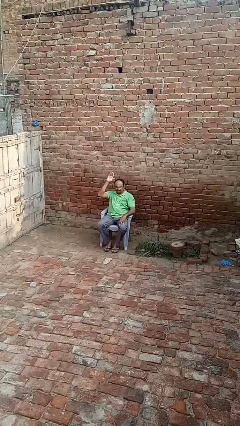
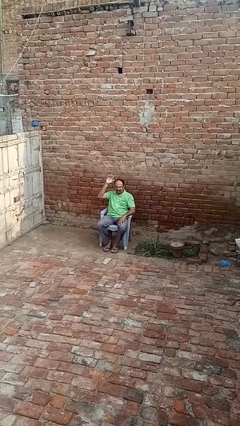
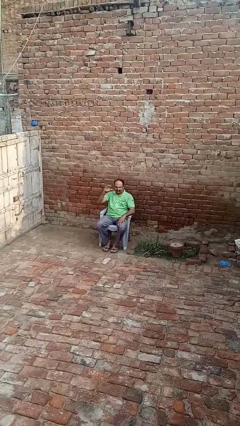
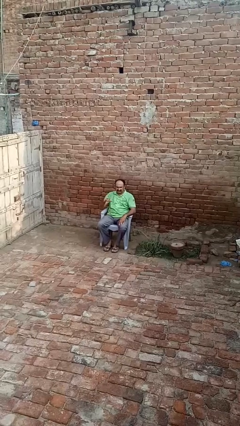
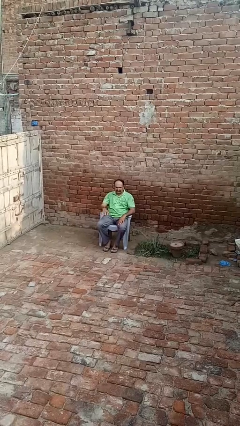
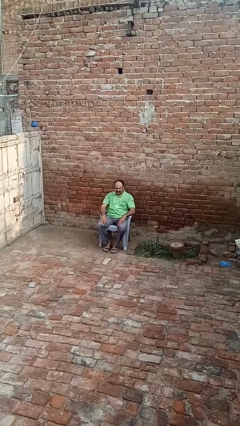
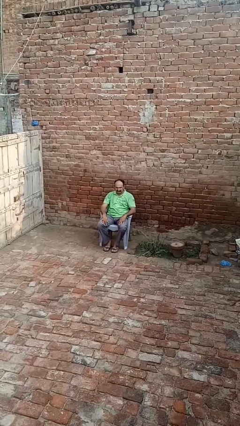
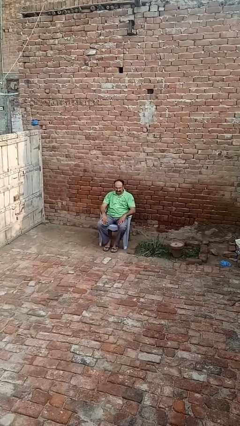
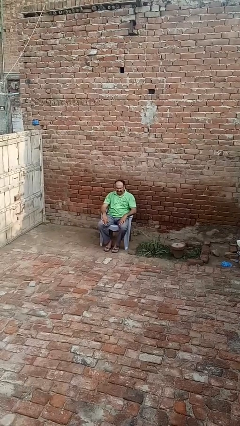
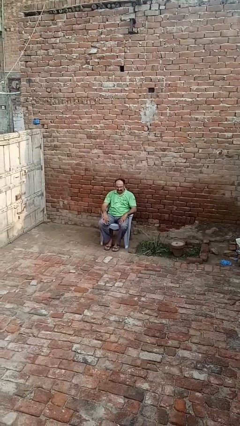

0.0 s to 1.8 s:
person gestures lower hand

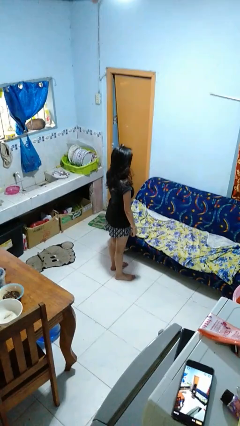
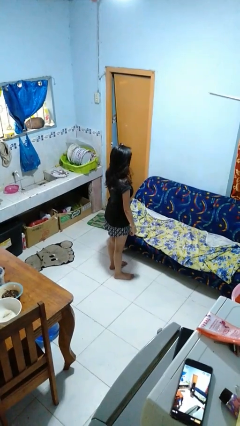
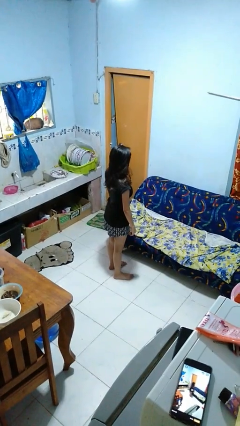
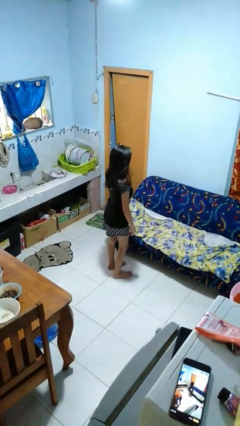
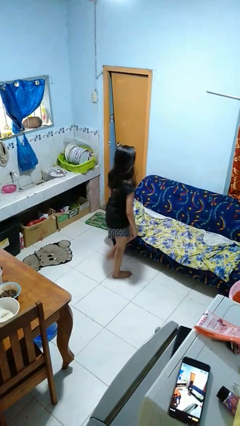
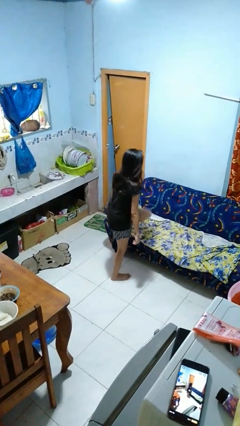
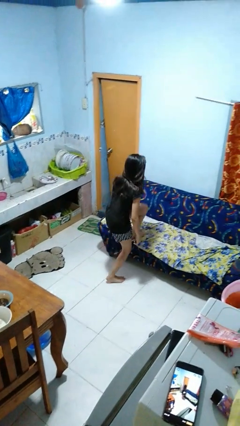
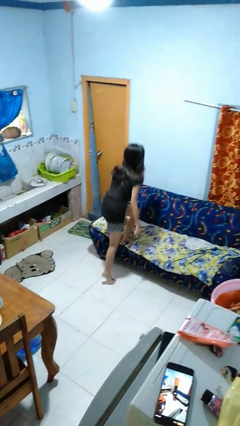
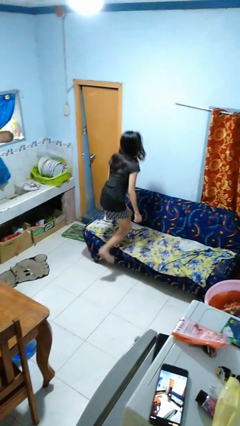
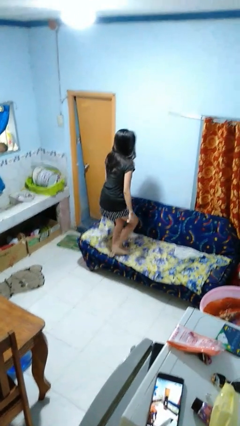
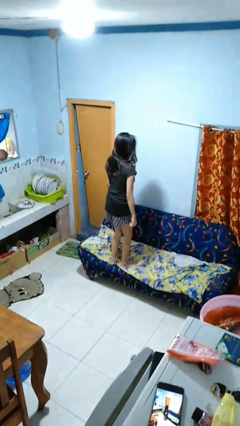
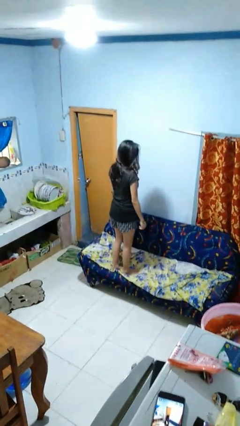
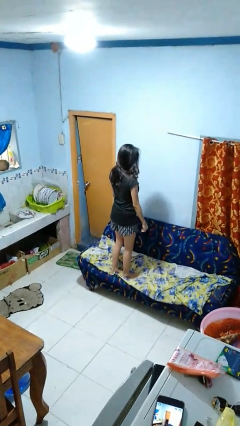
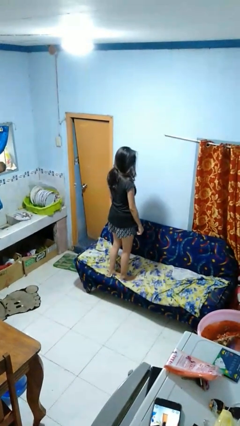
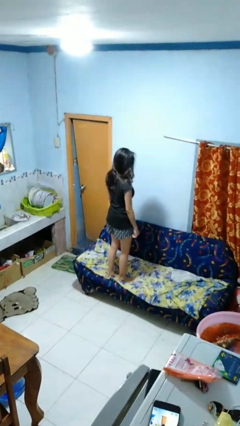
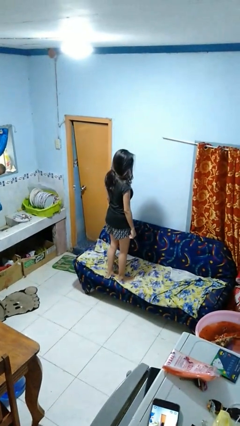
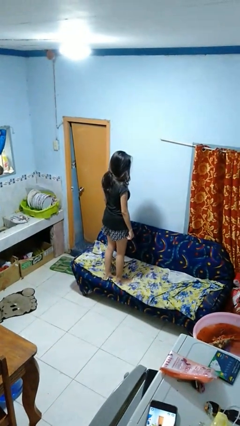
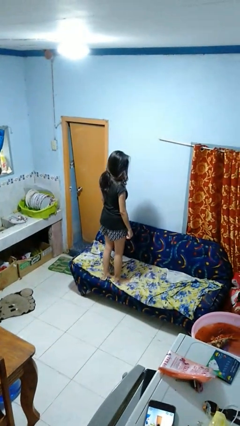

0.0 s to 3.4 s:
person climbs on couch

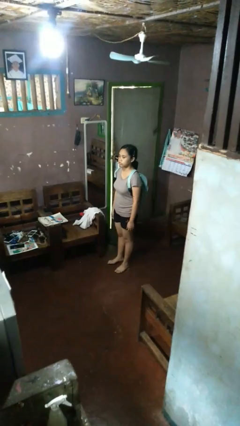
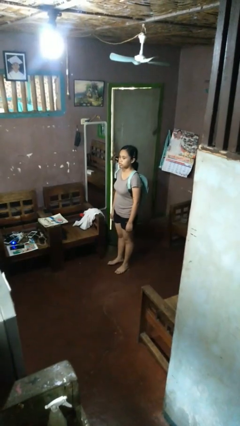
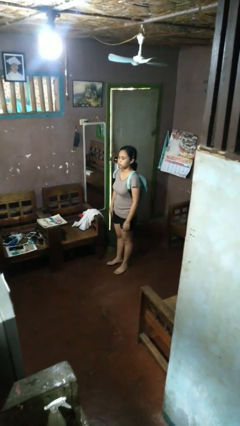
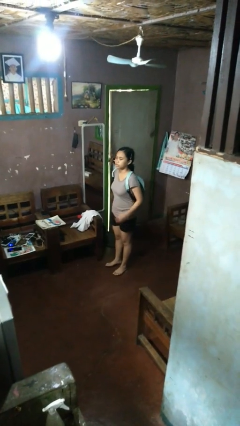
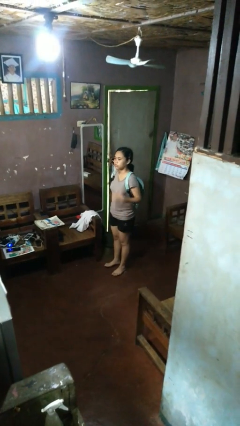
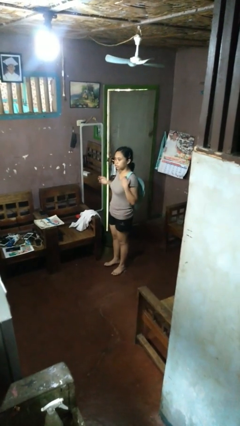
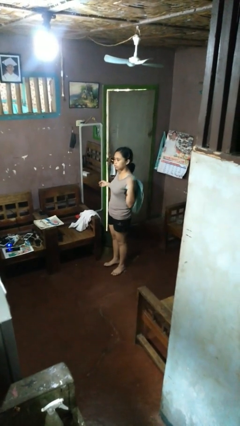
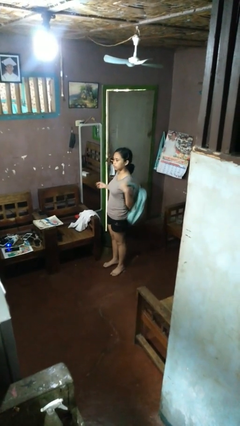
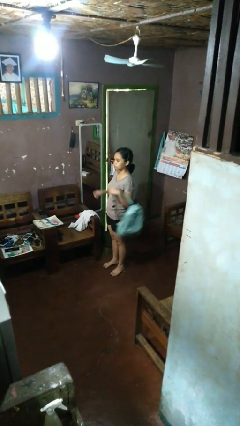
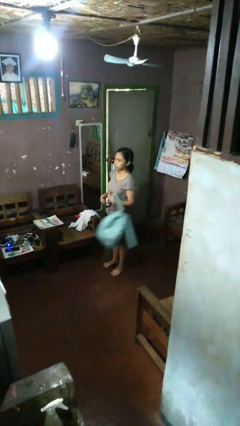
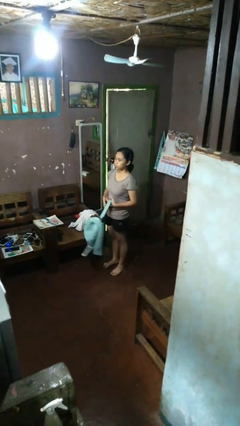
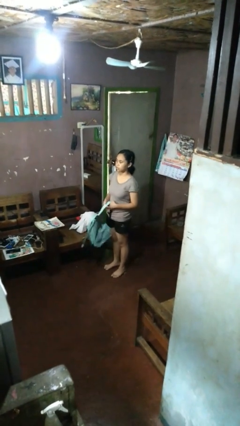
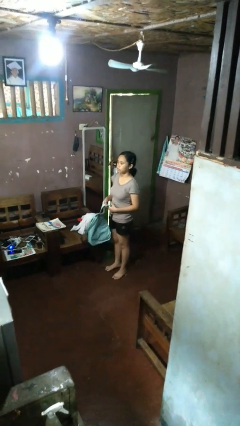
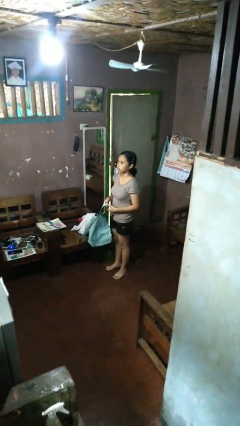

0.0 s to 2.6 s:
person takes off backpack

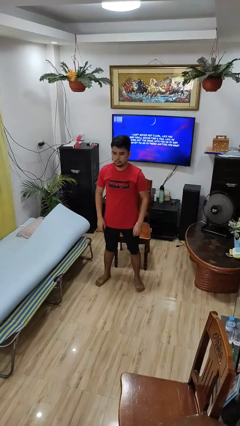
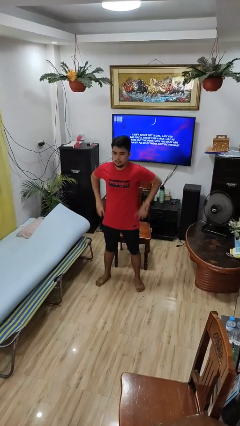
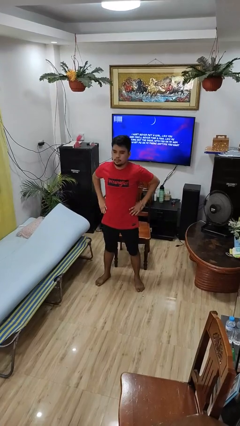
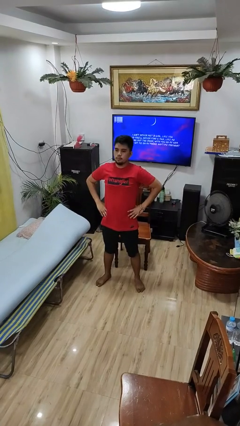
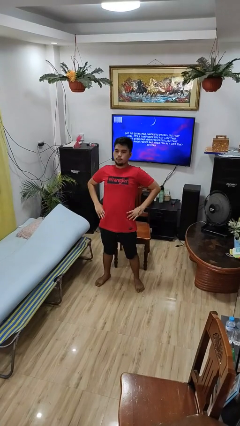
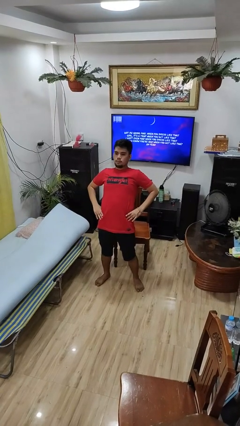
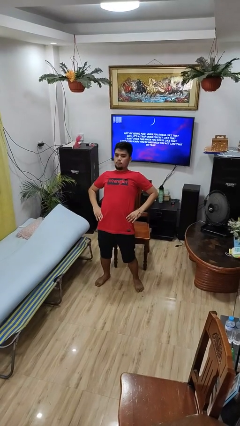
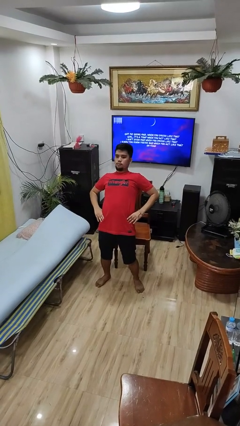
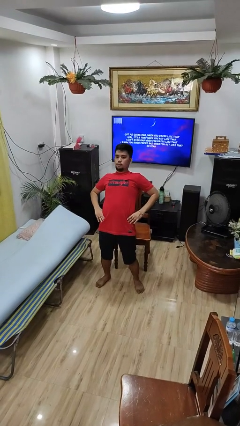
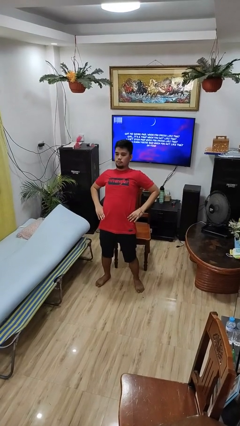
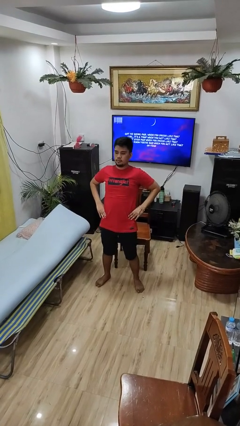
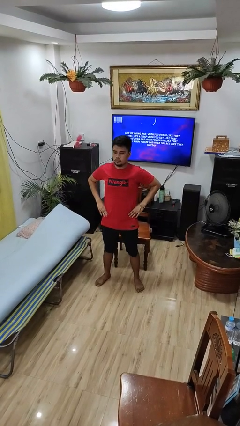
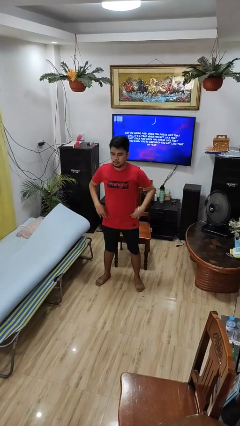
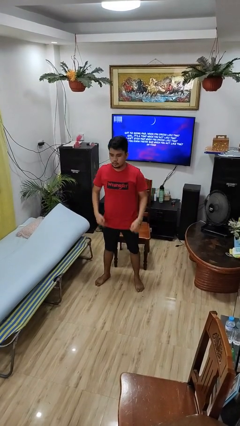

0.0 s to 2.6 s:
person stretches back

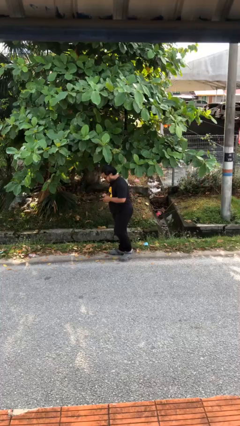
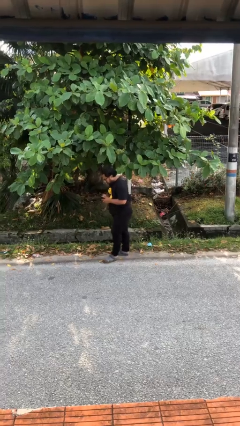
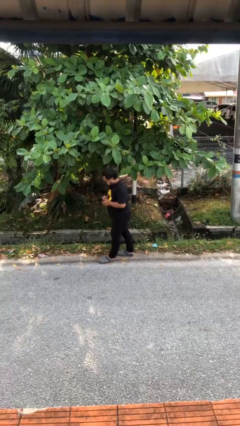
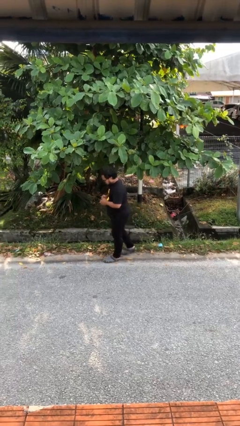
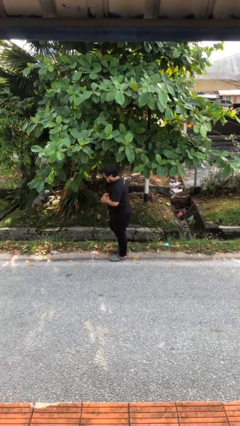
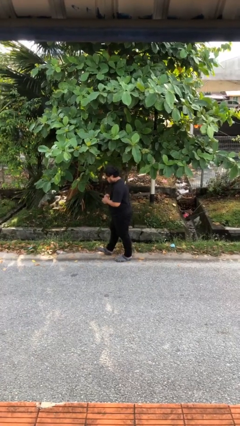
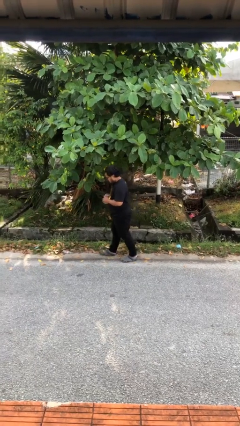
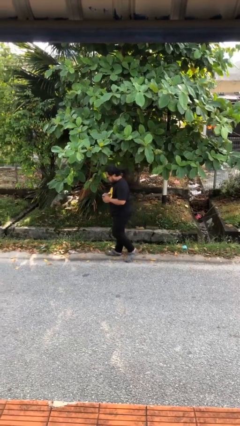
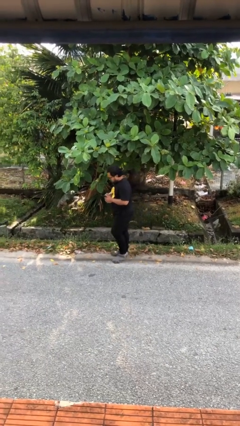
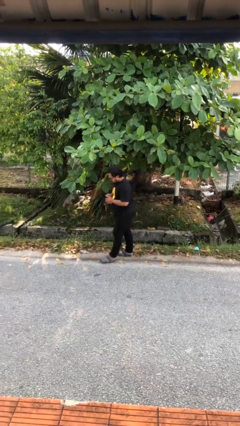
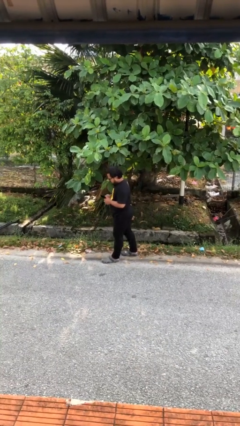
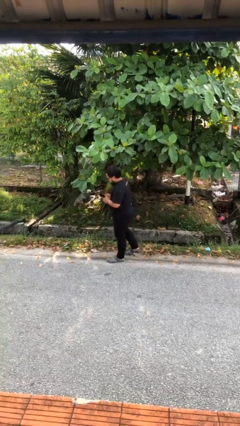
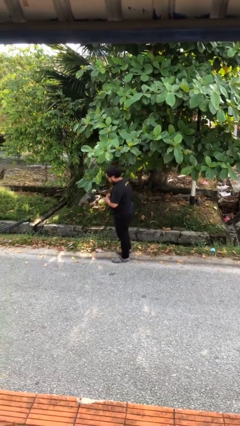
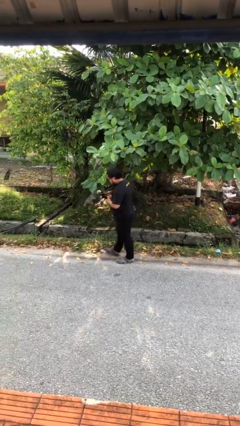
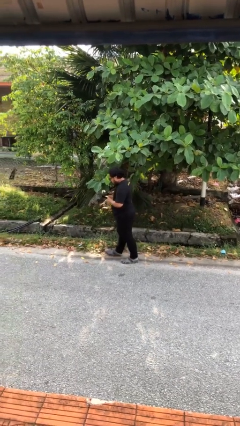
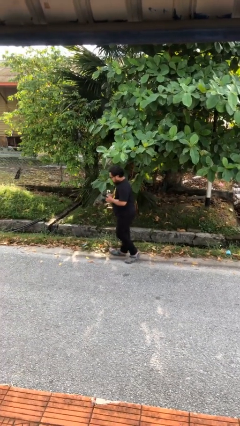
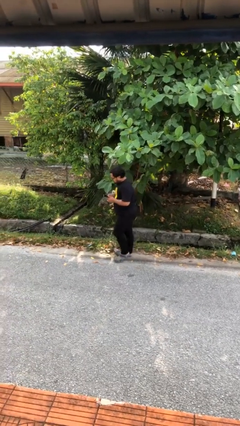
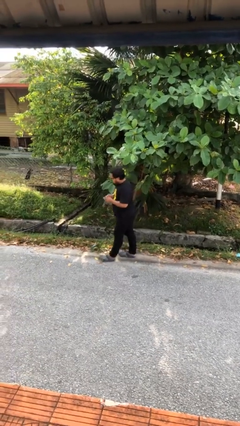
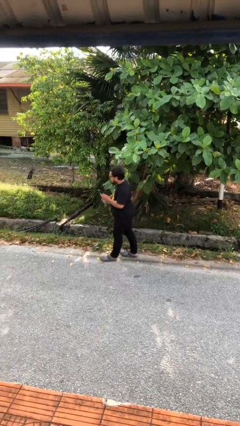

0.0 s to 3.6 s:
person texts on phone

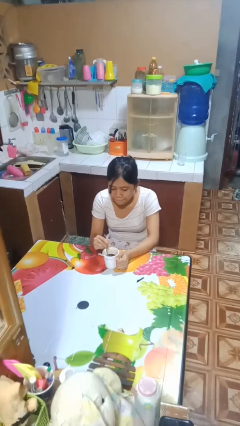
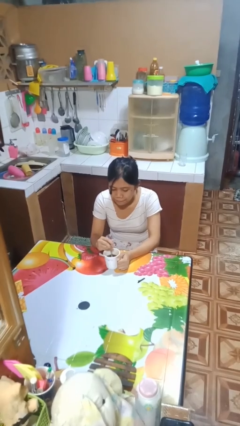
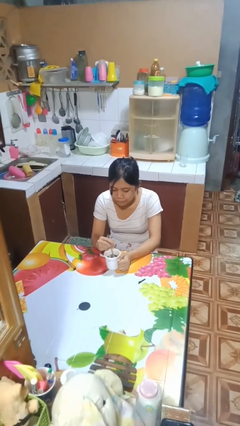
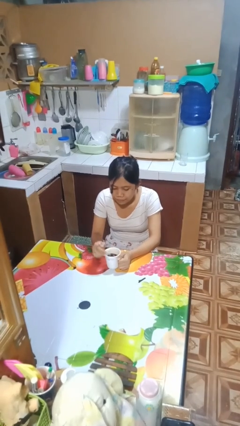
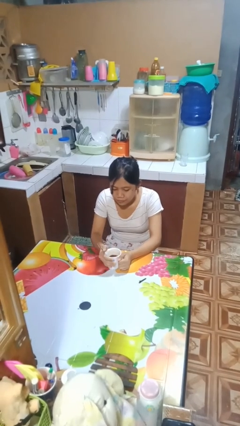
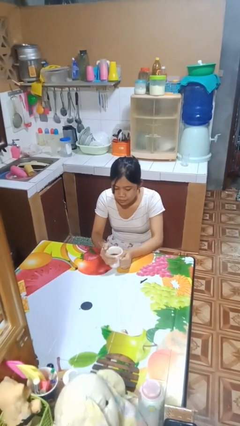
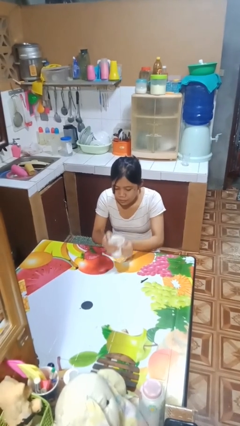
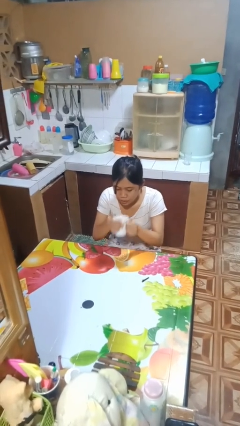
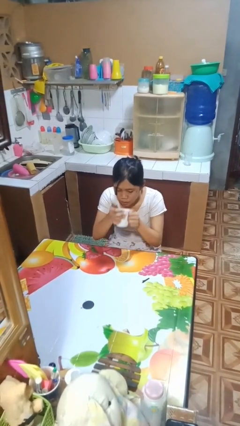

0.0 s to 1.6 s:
person stirs mug

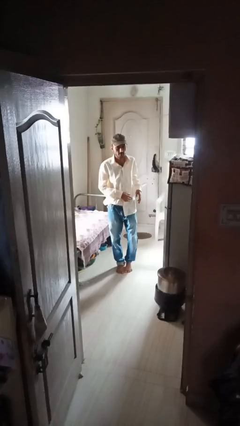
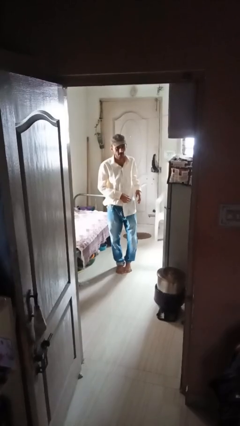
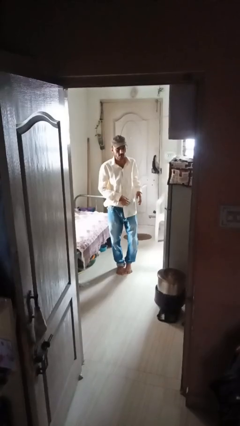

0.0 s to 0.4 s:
person dances in place

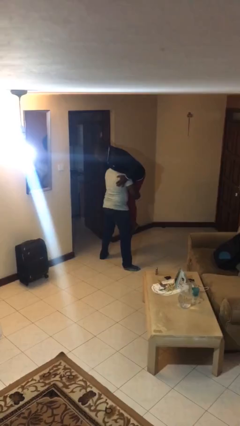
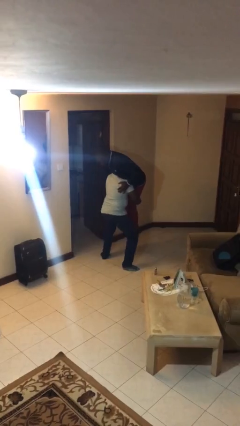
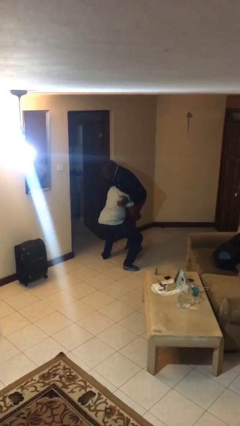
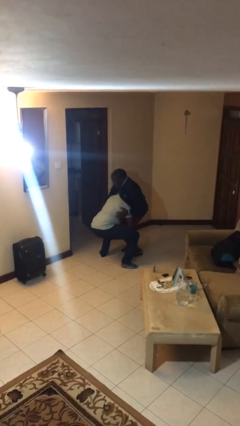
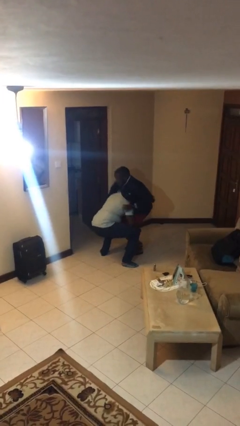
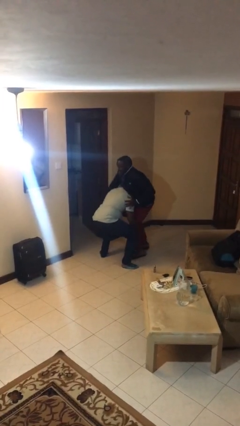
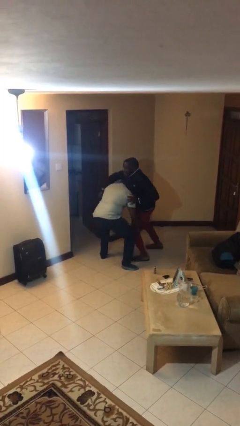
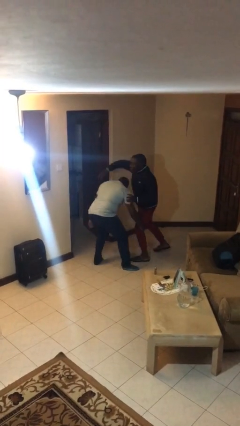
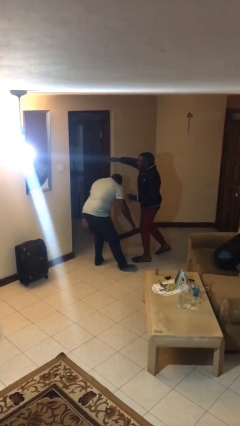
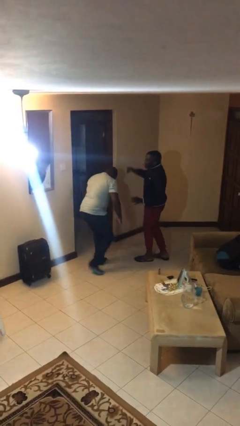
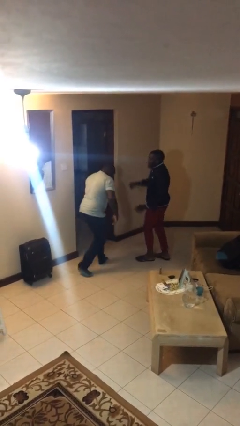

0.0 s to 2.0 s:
person puts down person
